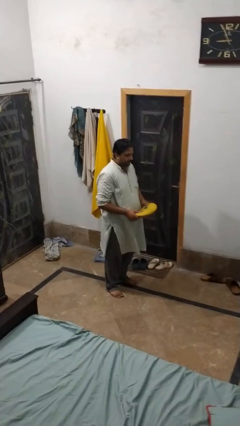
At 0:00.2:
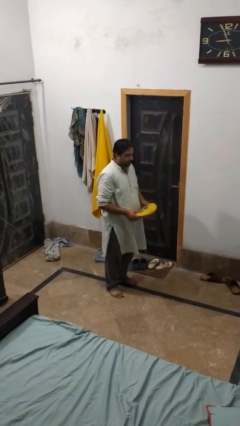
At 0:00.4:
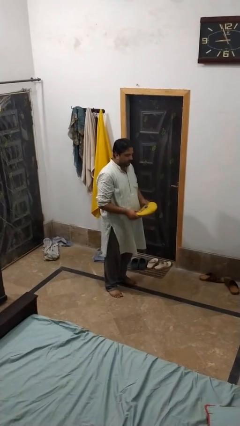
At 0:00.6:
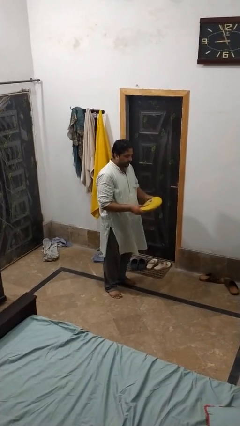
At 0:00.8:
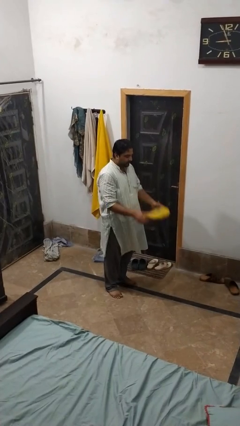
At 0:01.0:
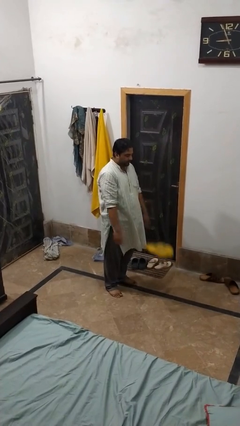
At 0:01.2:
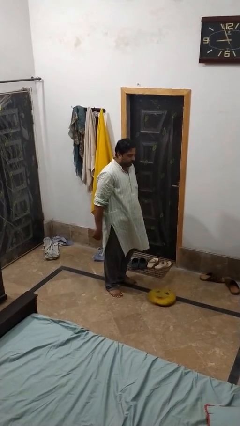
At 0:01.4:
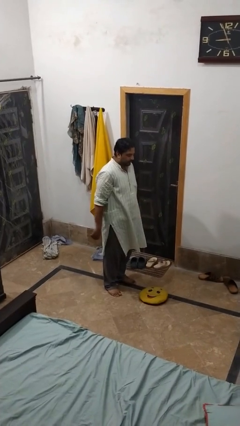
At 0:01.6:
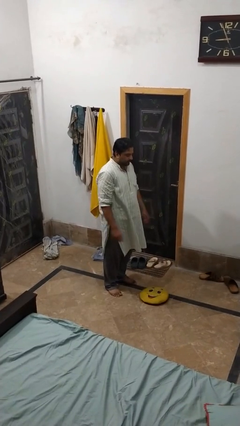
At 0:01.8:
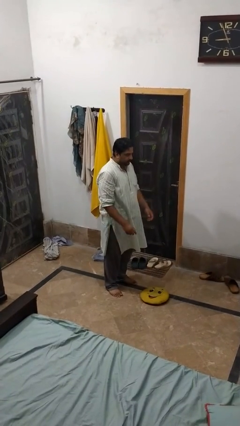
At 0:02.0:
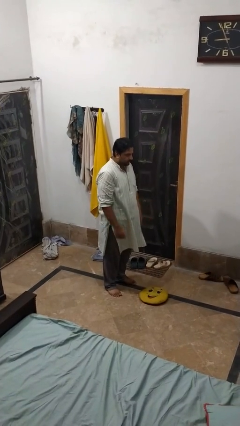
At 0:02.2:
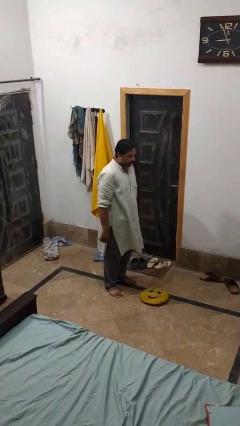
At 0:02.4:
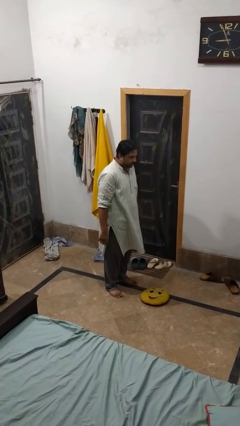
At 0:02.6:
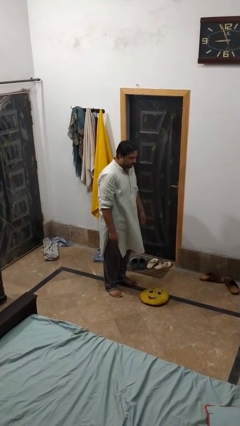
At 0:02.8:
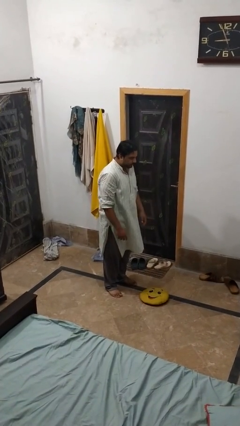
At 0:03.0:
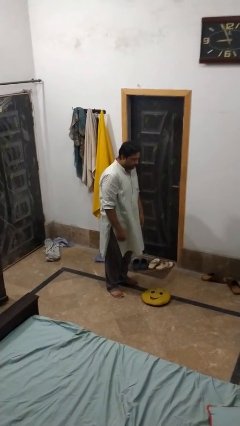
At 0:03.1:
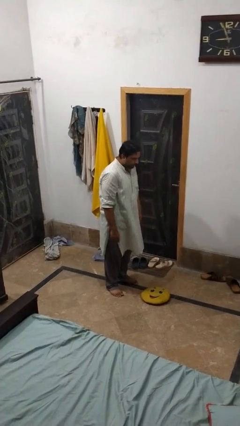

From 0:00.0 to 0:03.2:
person throws object to ground

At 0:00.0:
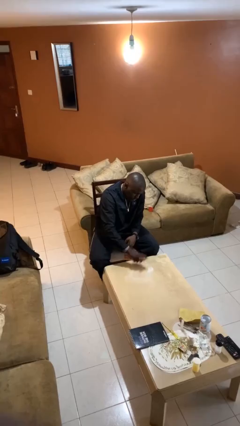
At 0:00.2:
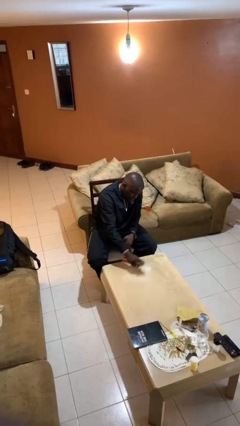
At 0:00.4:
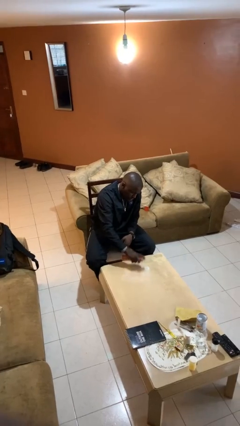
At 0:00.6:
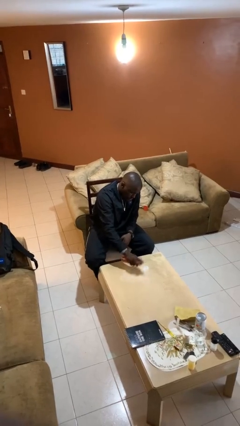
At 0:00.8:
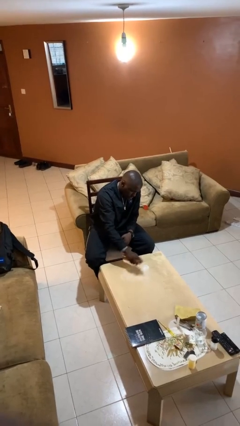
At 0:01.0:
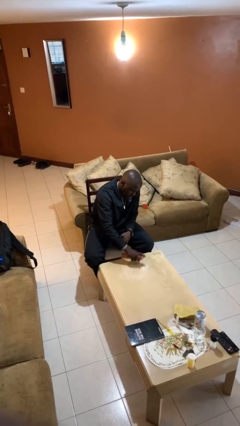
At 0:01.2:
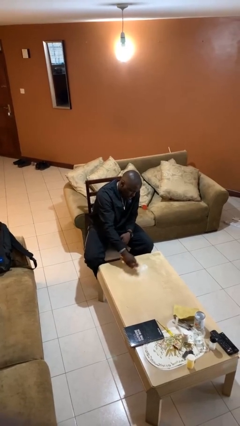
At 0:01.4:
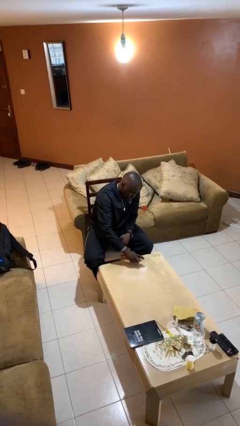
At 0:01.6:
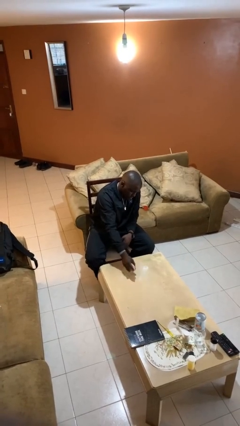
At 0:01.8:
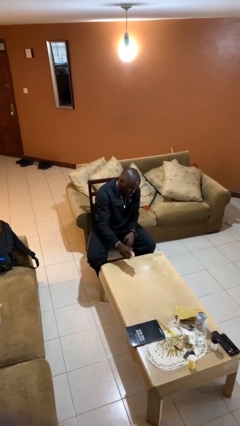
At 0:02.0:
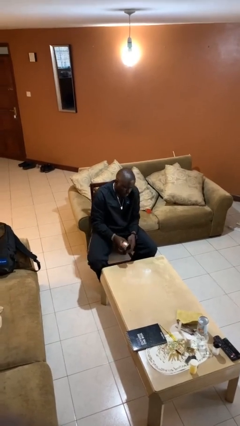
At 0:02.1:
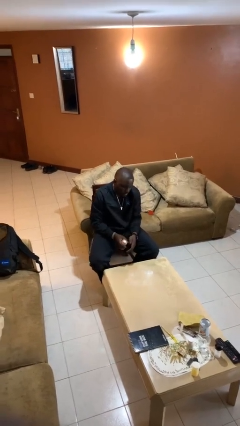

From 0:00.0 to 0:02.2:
person sprays from bottle

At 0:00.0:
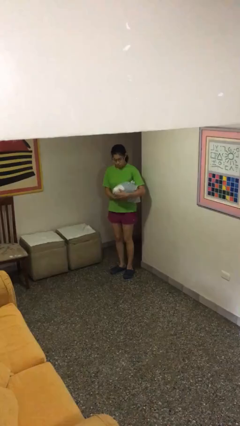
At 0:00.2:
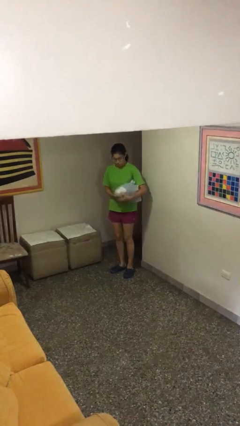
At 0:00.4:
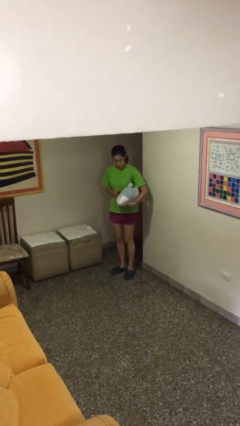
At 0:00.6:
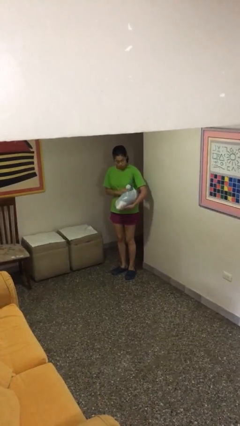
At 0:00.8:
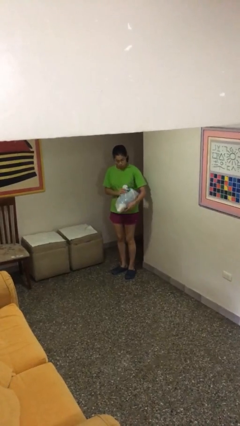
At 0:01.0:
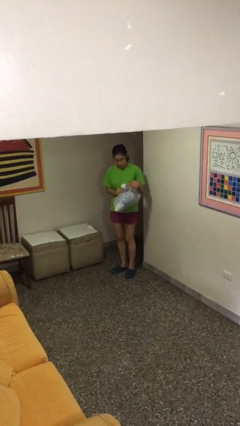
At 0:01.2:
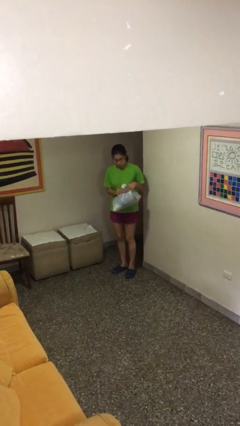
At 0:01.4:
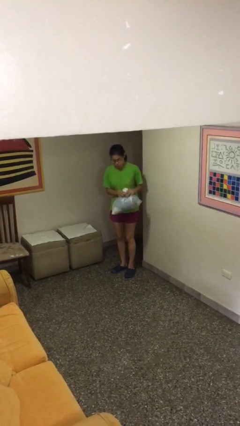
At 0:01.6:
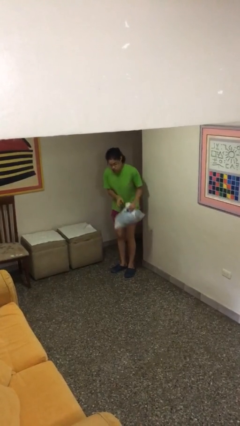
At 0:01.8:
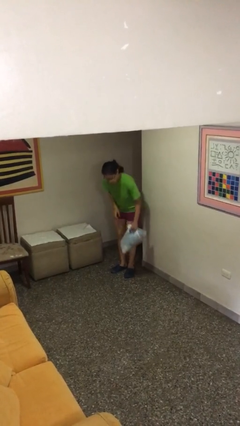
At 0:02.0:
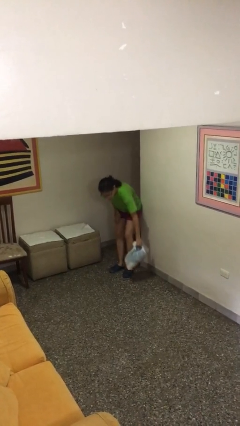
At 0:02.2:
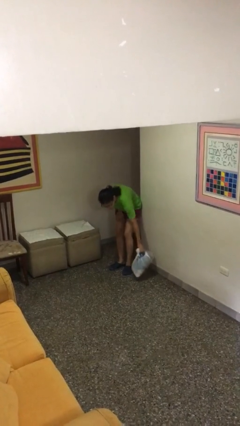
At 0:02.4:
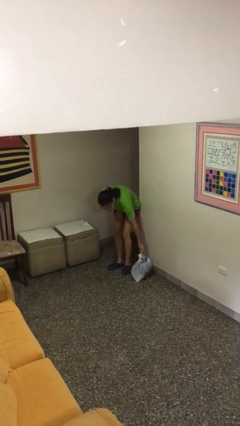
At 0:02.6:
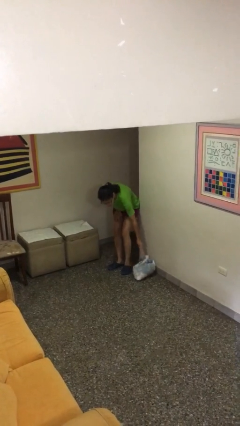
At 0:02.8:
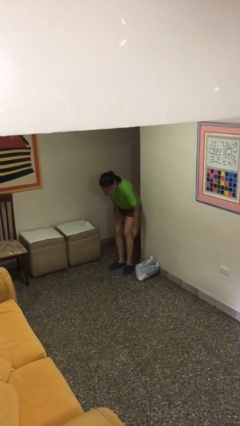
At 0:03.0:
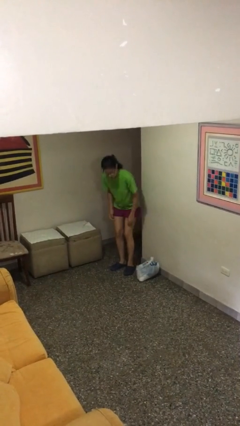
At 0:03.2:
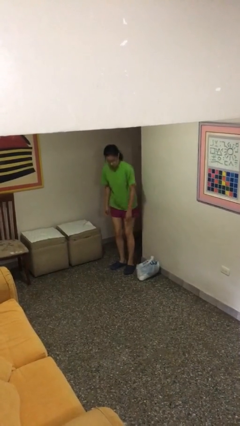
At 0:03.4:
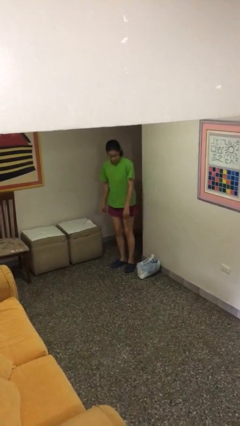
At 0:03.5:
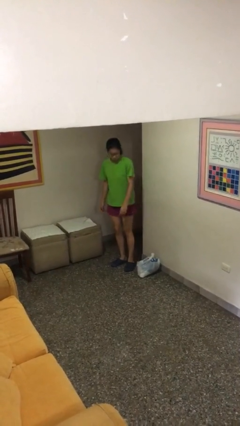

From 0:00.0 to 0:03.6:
person puts down object on floor

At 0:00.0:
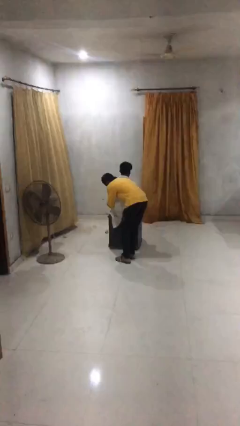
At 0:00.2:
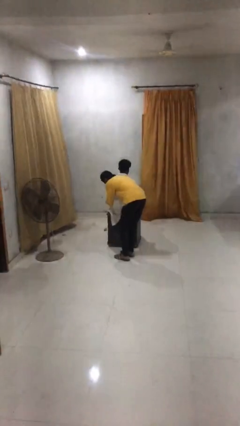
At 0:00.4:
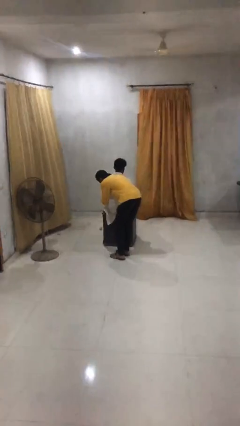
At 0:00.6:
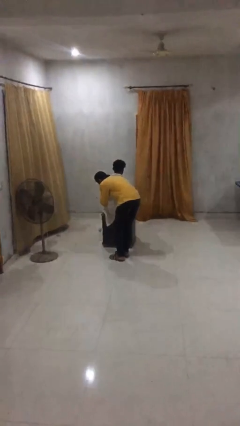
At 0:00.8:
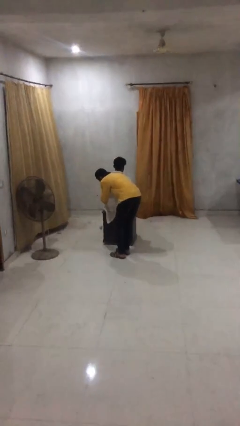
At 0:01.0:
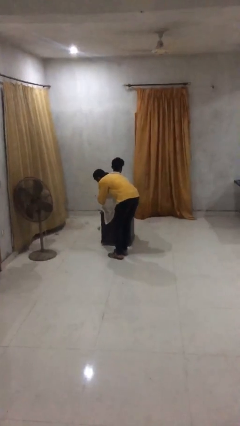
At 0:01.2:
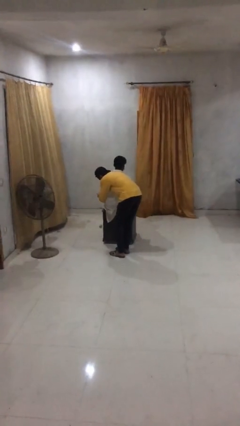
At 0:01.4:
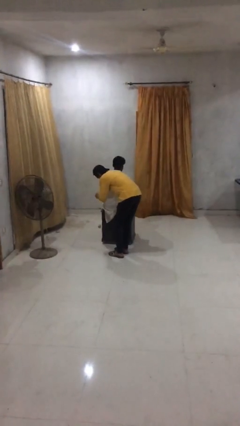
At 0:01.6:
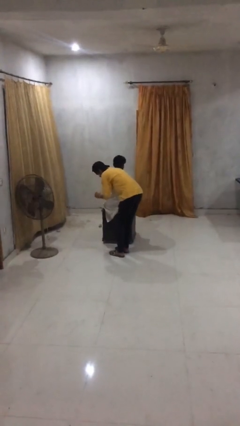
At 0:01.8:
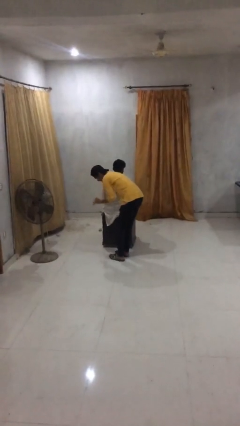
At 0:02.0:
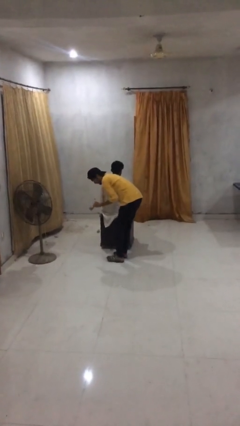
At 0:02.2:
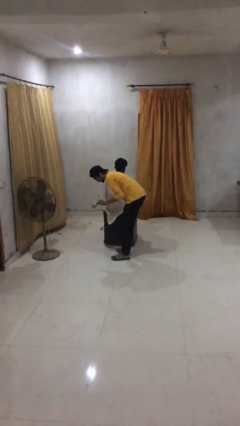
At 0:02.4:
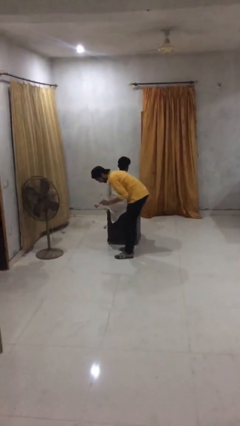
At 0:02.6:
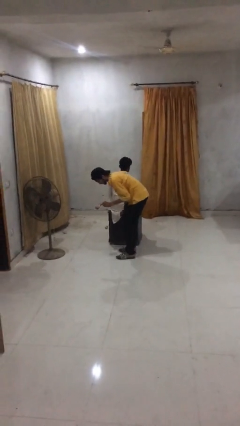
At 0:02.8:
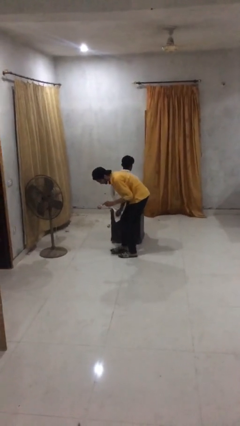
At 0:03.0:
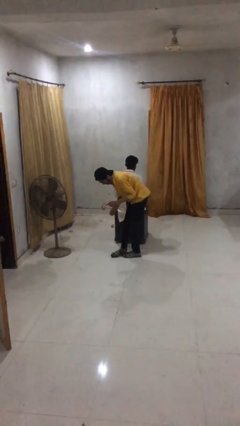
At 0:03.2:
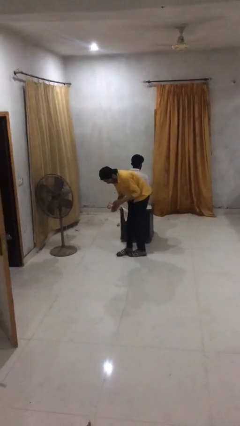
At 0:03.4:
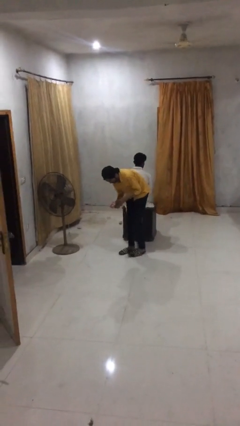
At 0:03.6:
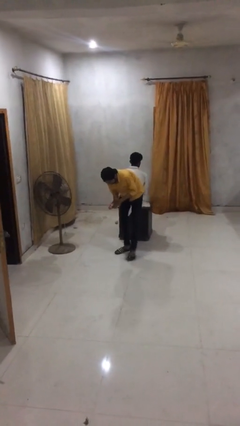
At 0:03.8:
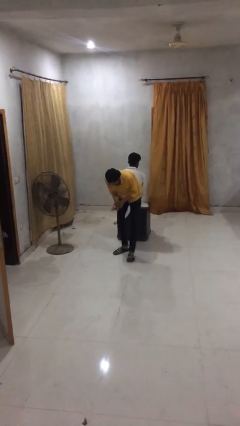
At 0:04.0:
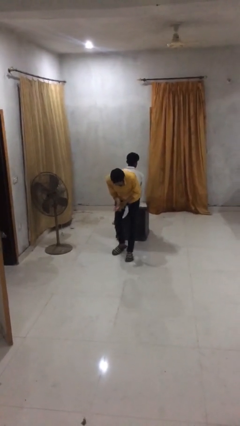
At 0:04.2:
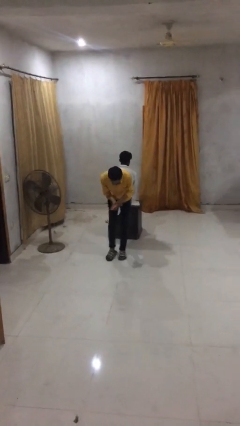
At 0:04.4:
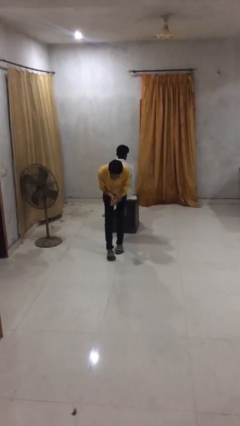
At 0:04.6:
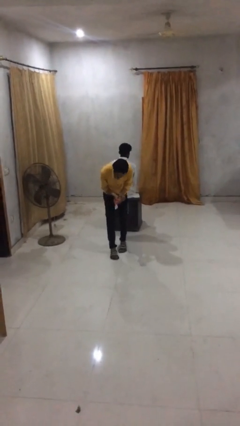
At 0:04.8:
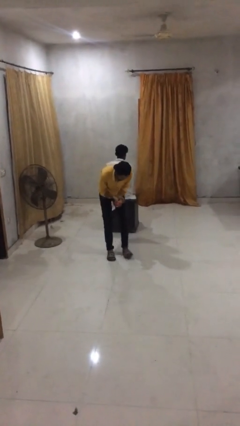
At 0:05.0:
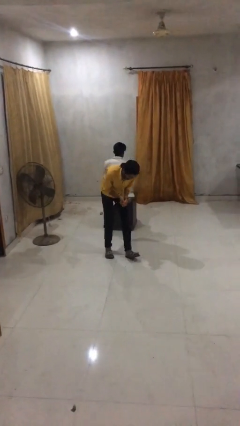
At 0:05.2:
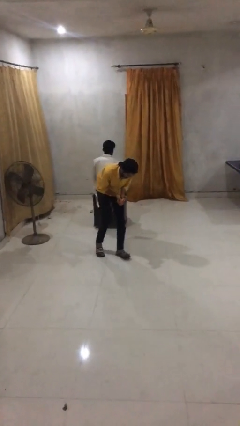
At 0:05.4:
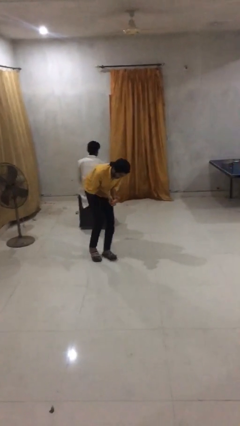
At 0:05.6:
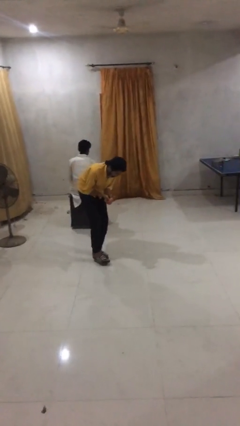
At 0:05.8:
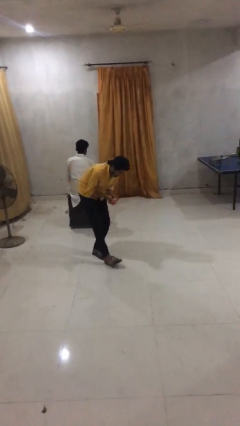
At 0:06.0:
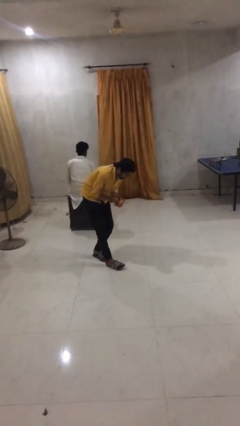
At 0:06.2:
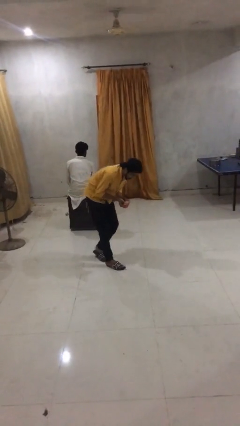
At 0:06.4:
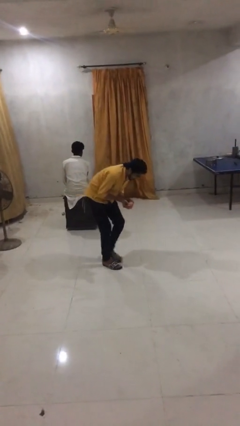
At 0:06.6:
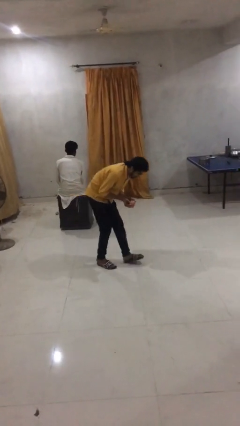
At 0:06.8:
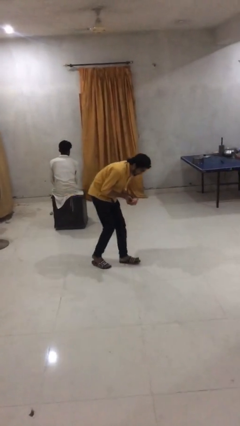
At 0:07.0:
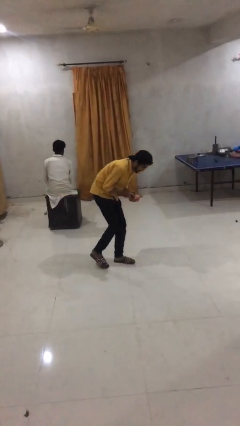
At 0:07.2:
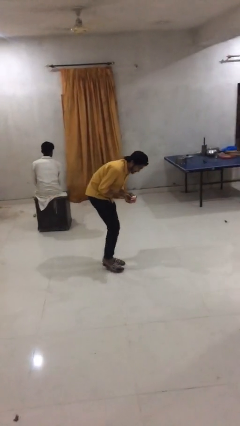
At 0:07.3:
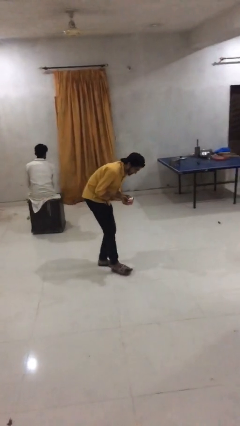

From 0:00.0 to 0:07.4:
person steals object from person

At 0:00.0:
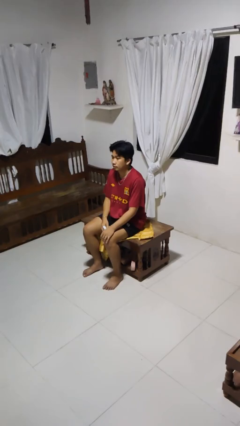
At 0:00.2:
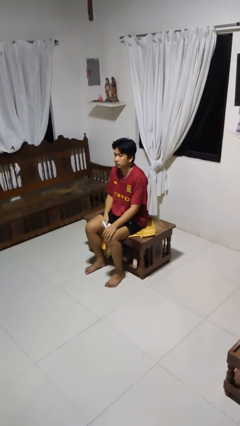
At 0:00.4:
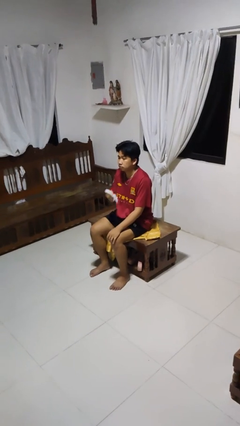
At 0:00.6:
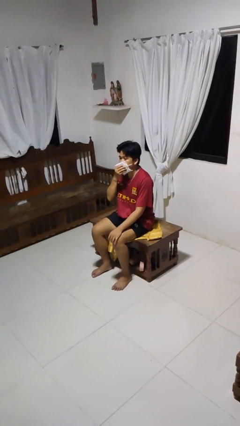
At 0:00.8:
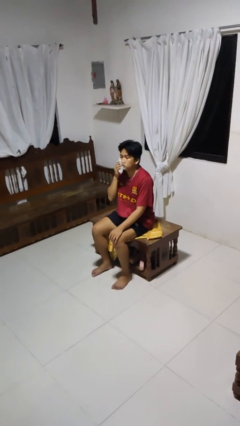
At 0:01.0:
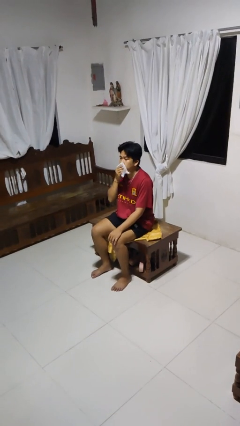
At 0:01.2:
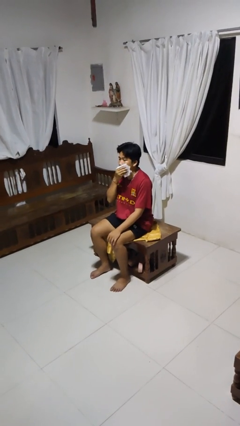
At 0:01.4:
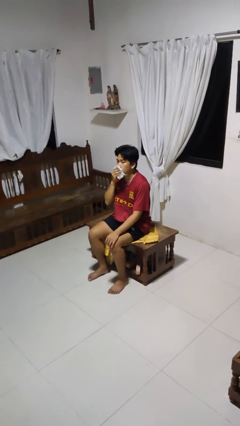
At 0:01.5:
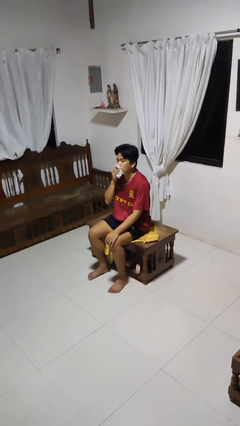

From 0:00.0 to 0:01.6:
person wipes mouth with napkin
